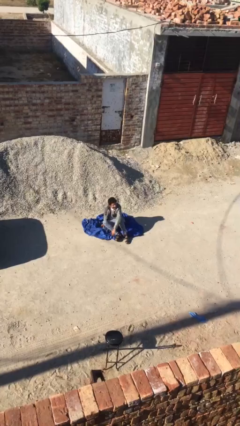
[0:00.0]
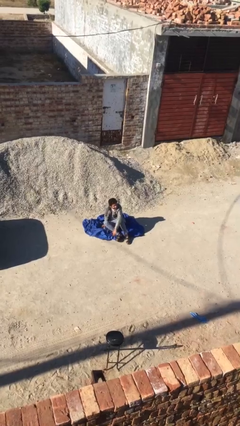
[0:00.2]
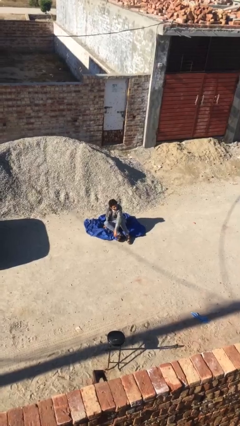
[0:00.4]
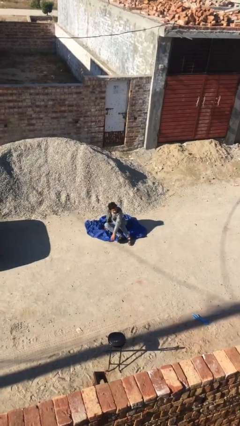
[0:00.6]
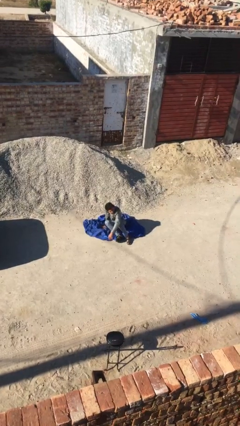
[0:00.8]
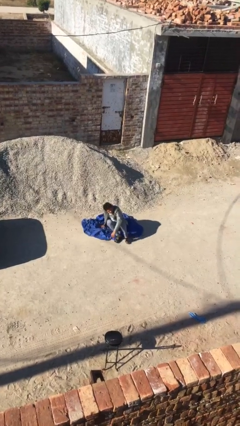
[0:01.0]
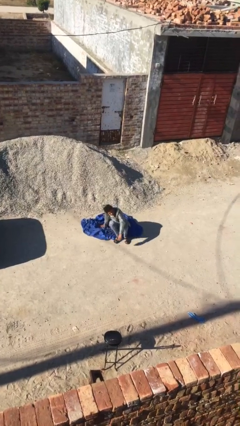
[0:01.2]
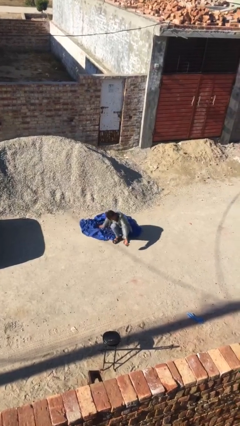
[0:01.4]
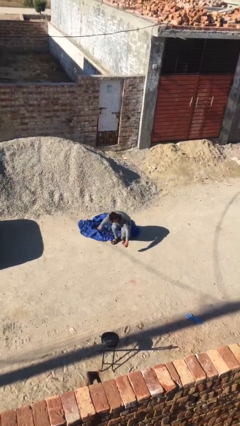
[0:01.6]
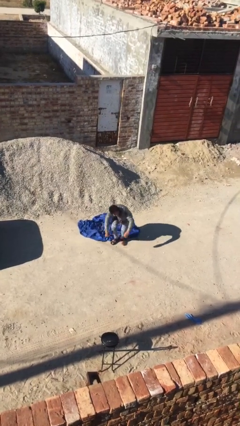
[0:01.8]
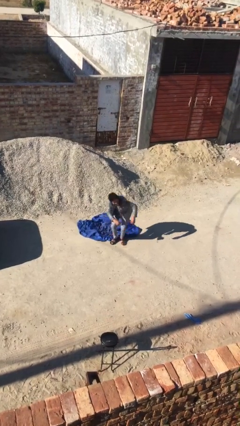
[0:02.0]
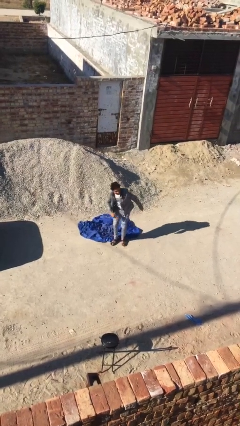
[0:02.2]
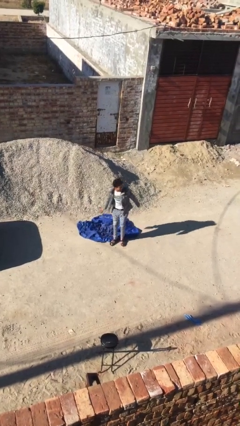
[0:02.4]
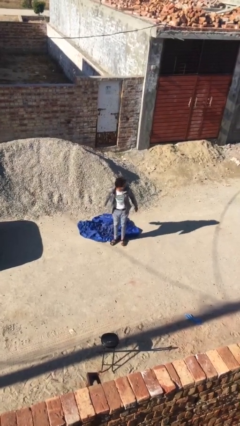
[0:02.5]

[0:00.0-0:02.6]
person stands up

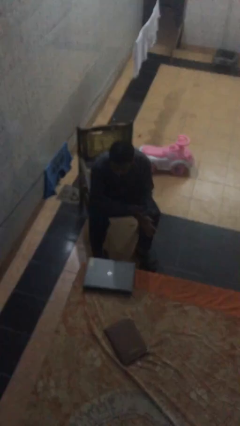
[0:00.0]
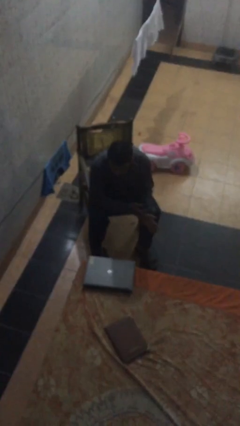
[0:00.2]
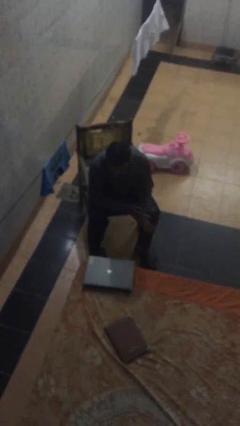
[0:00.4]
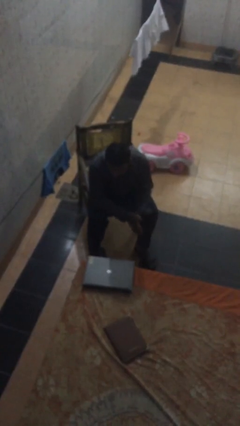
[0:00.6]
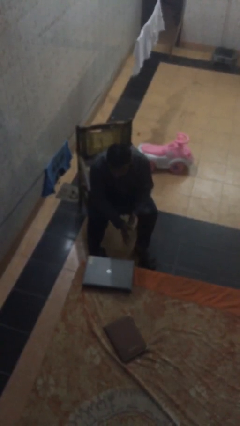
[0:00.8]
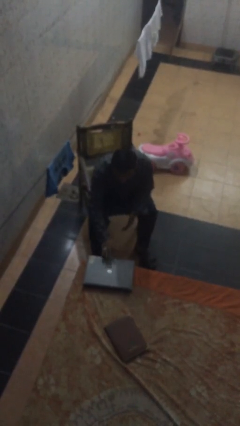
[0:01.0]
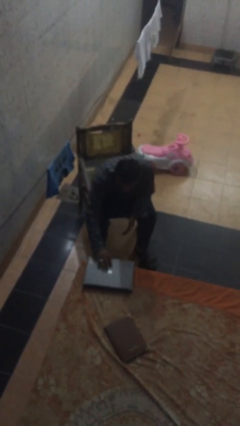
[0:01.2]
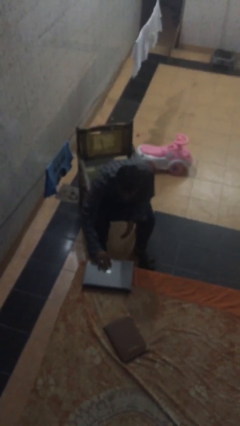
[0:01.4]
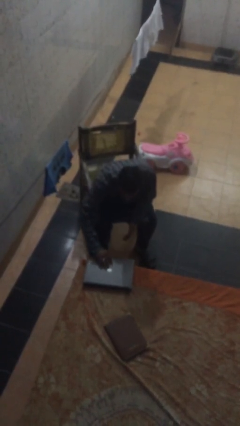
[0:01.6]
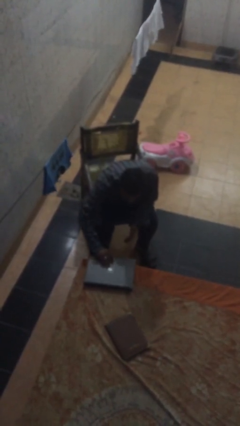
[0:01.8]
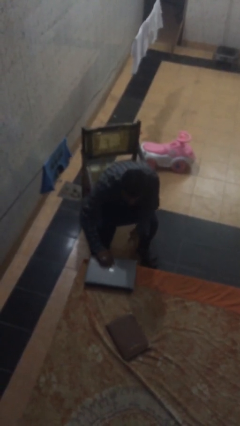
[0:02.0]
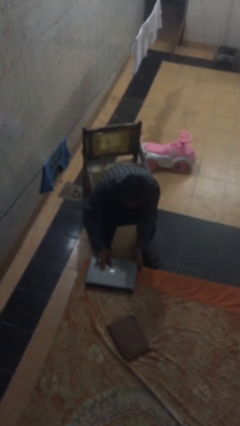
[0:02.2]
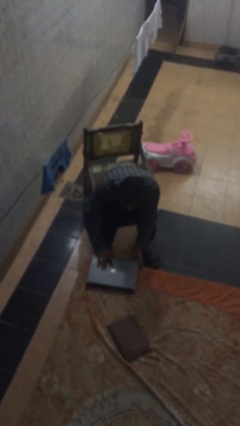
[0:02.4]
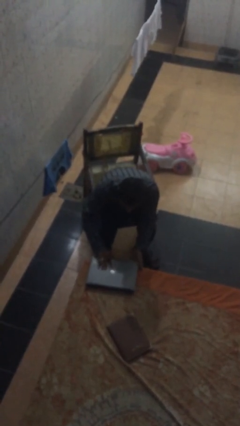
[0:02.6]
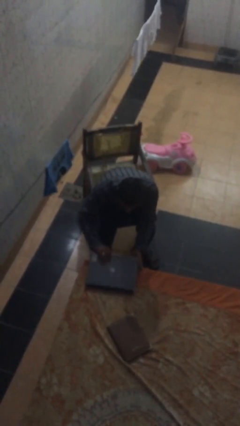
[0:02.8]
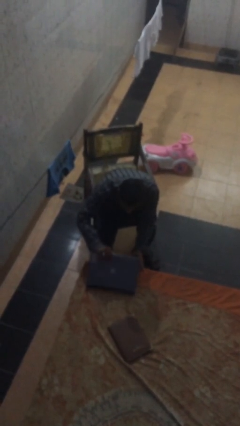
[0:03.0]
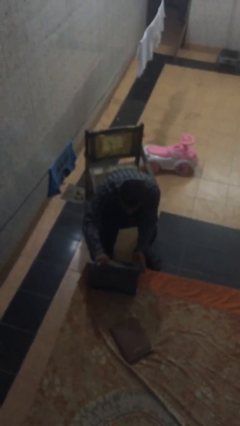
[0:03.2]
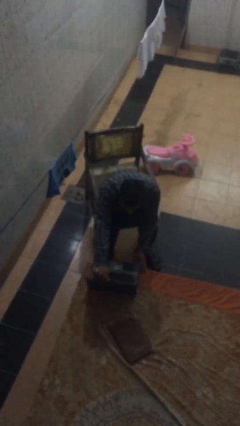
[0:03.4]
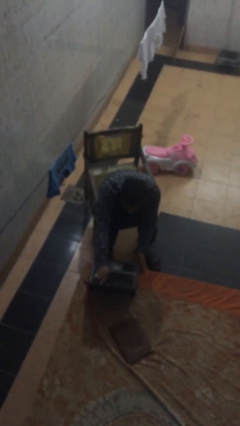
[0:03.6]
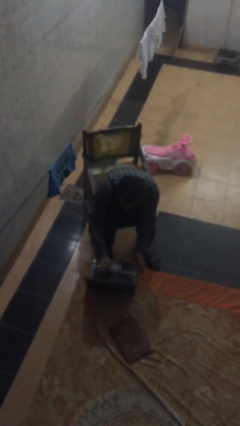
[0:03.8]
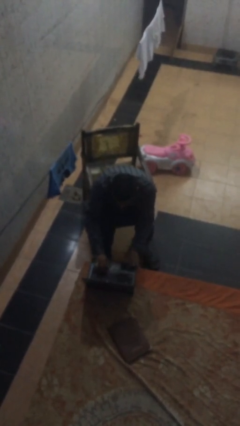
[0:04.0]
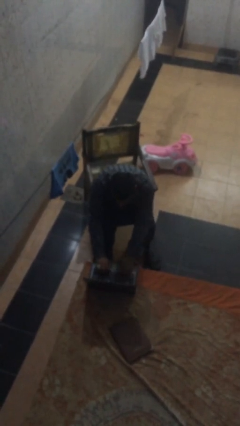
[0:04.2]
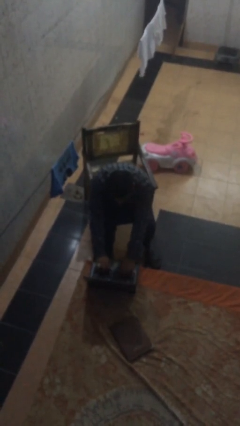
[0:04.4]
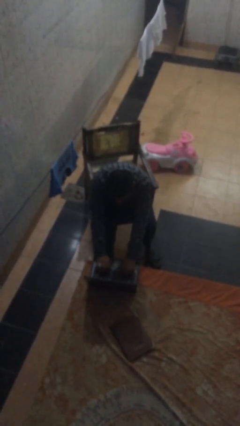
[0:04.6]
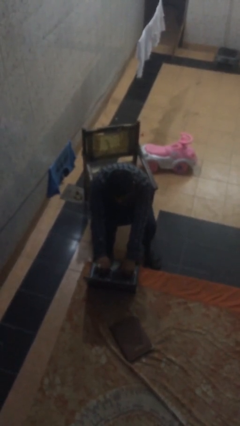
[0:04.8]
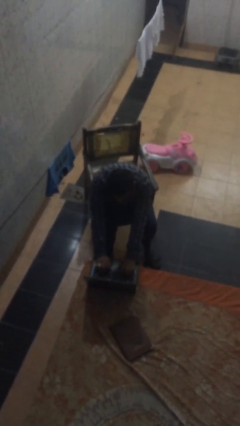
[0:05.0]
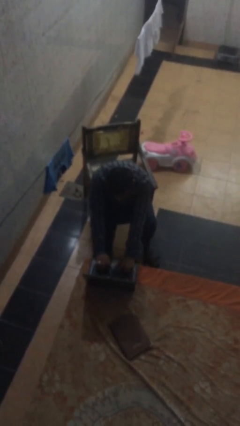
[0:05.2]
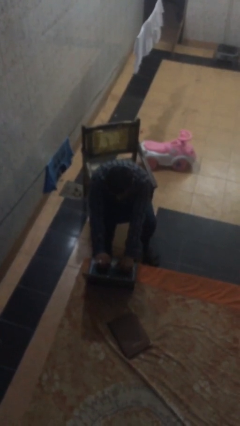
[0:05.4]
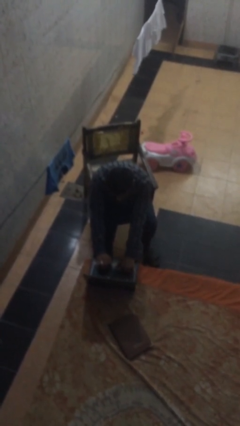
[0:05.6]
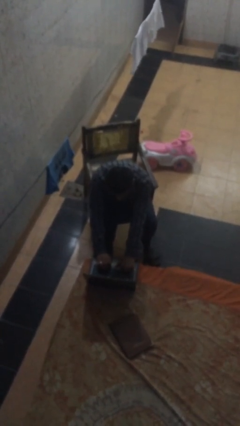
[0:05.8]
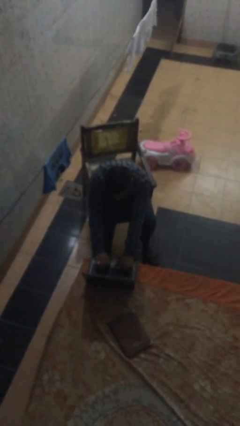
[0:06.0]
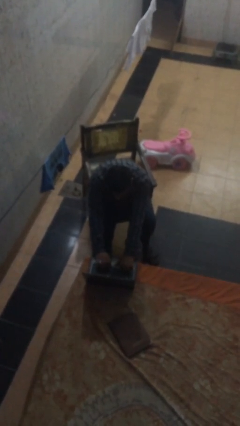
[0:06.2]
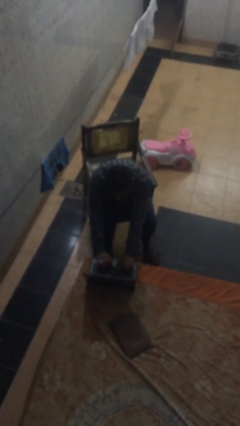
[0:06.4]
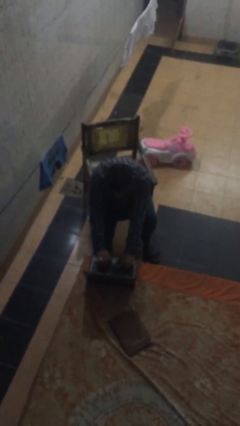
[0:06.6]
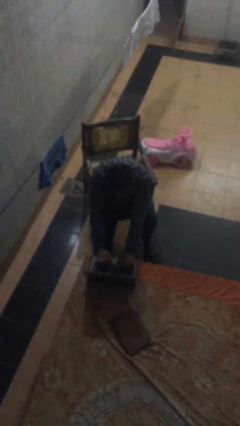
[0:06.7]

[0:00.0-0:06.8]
person interacts with laptop

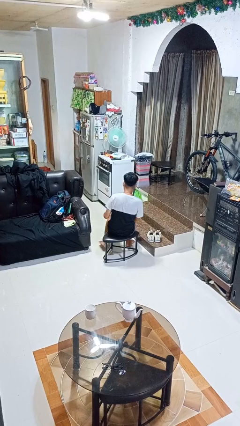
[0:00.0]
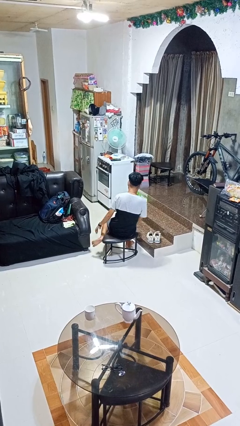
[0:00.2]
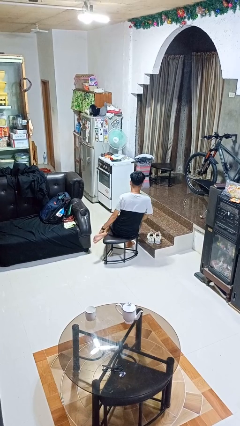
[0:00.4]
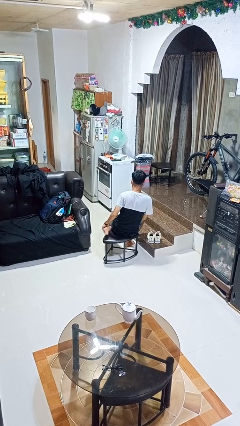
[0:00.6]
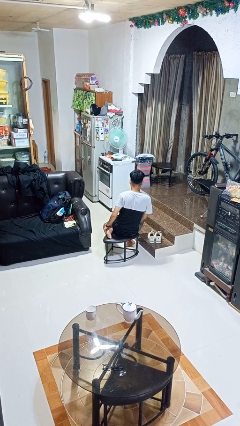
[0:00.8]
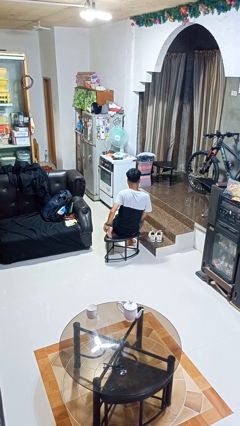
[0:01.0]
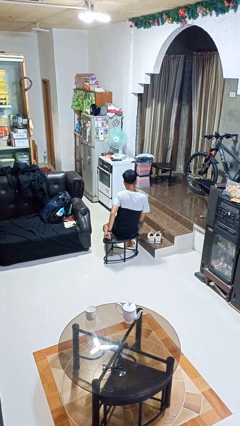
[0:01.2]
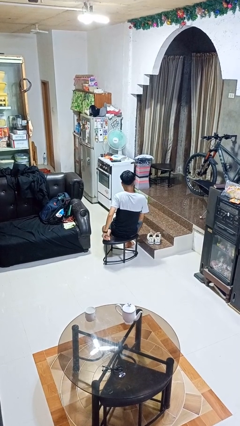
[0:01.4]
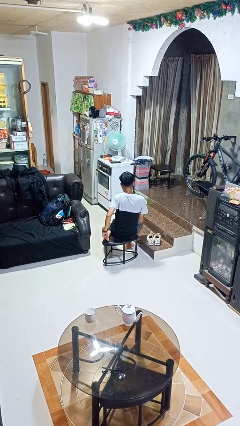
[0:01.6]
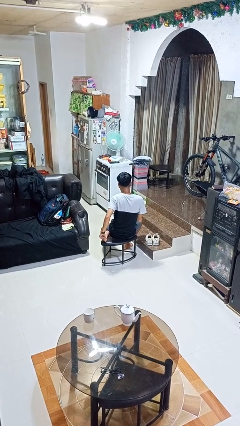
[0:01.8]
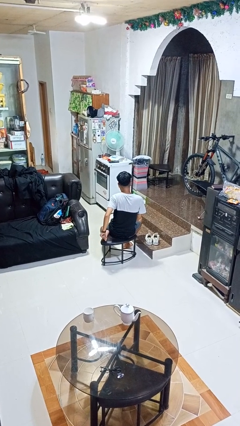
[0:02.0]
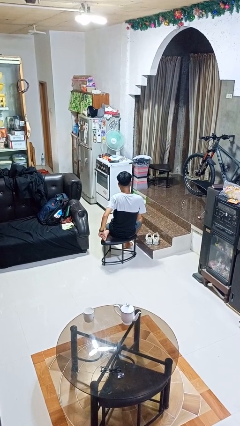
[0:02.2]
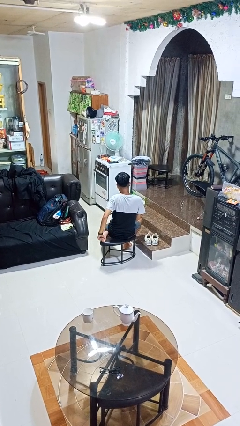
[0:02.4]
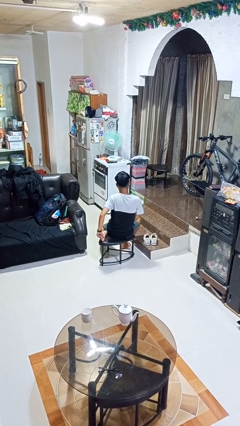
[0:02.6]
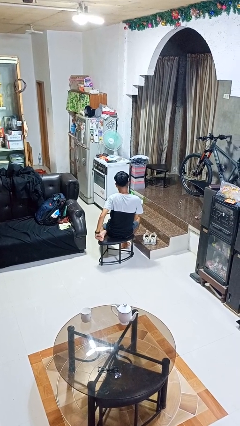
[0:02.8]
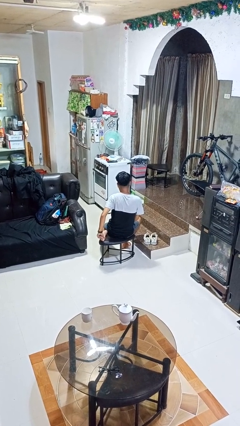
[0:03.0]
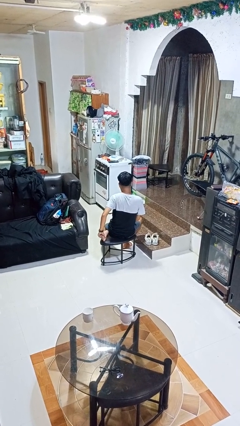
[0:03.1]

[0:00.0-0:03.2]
person rubs foot

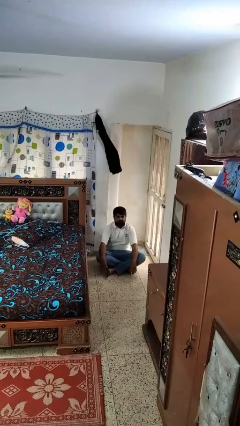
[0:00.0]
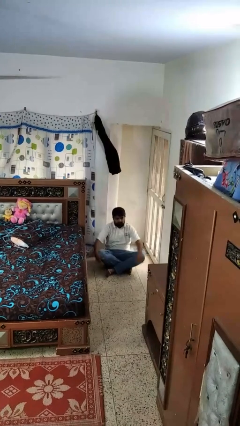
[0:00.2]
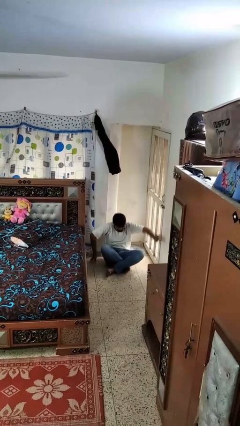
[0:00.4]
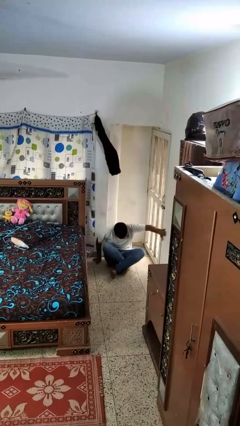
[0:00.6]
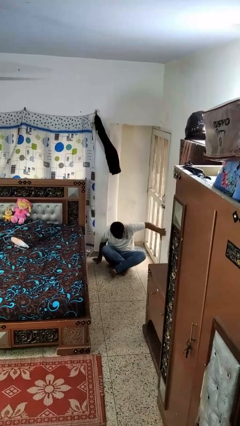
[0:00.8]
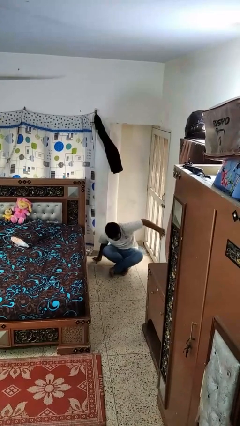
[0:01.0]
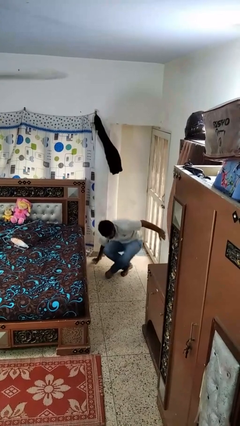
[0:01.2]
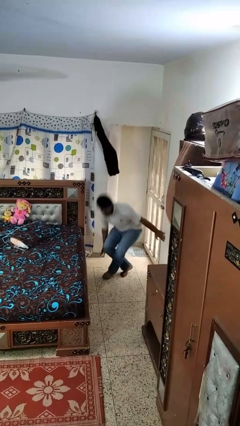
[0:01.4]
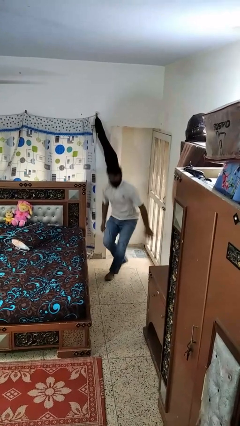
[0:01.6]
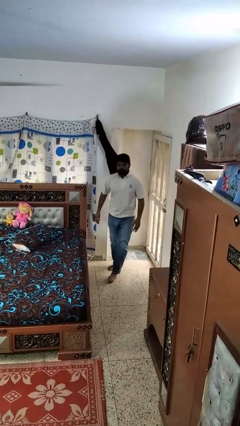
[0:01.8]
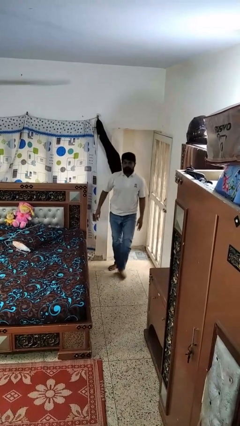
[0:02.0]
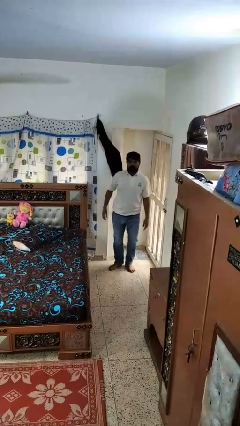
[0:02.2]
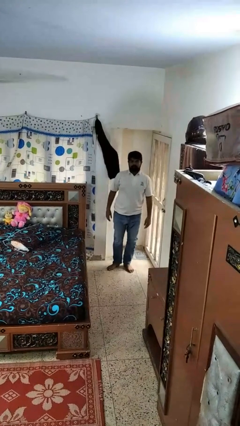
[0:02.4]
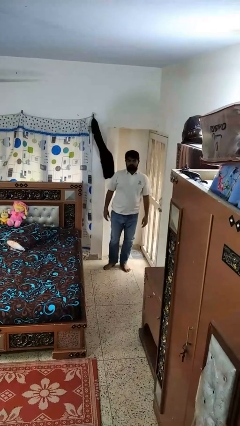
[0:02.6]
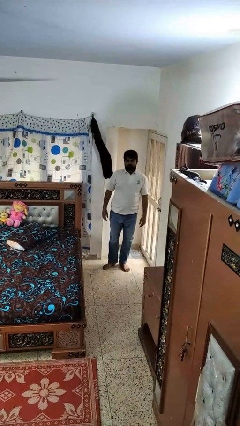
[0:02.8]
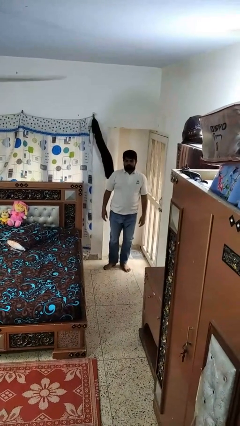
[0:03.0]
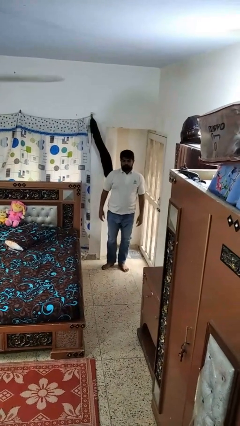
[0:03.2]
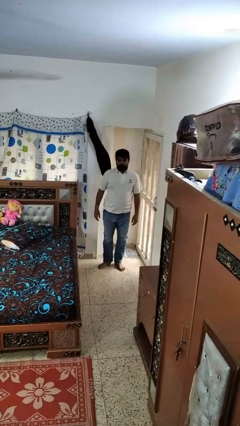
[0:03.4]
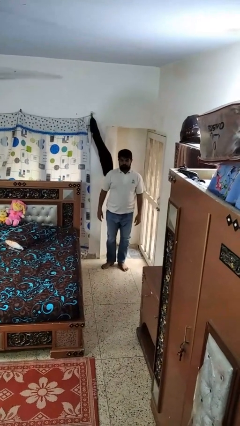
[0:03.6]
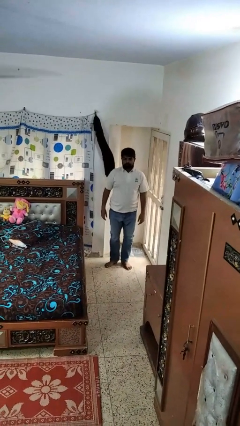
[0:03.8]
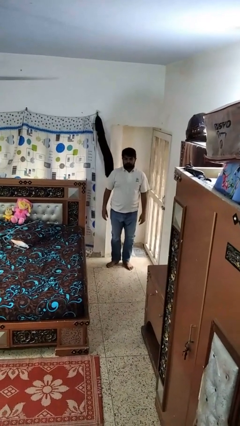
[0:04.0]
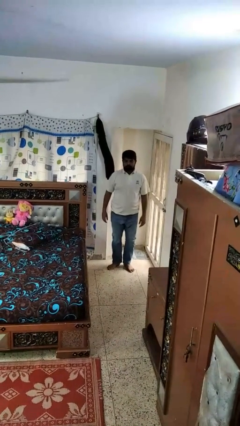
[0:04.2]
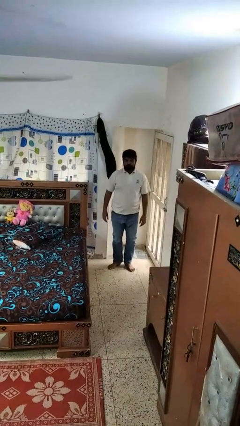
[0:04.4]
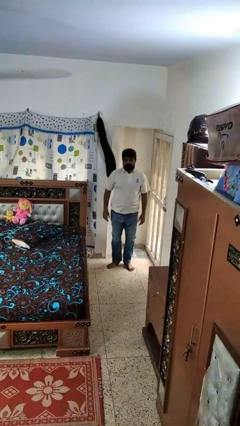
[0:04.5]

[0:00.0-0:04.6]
person stands up from floor
